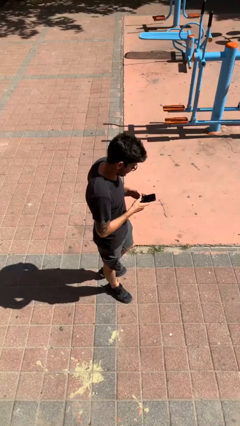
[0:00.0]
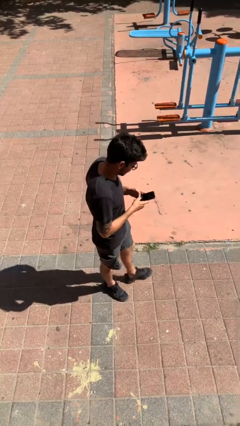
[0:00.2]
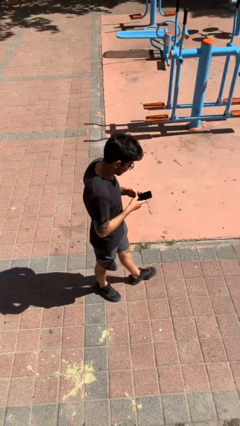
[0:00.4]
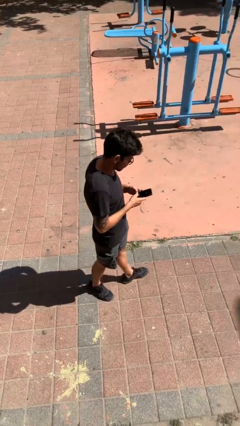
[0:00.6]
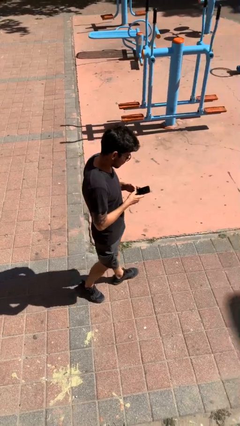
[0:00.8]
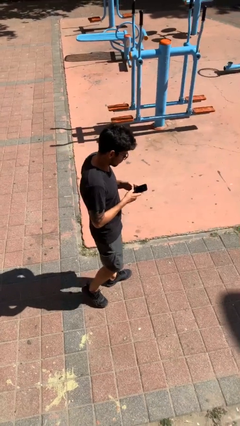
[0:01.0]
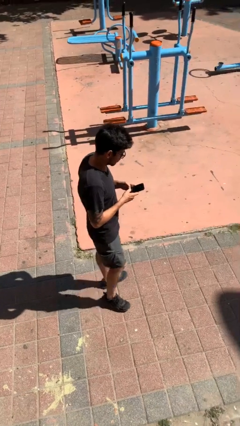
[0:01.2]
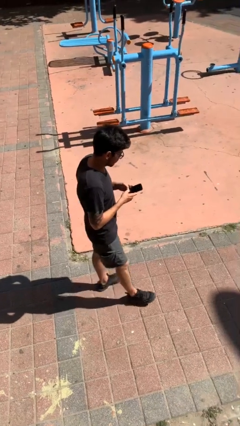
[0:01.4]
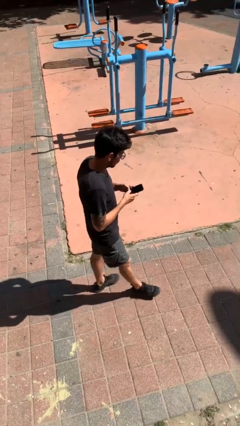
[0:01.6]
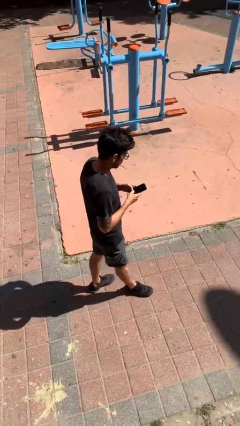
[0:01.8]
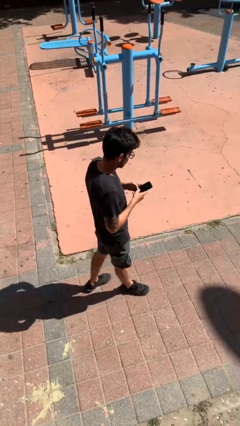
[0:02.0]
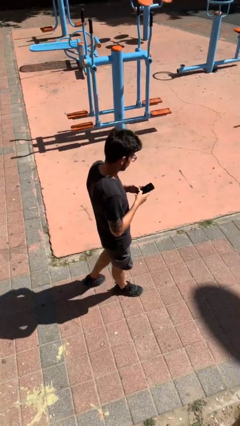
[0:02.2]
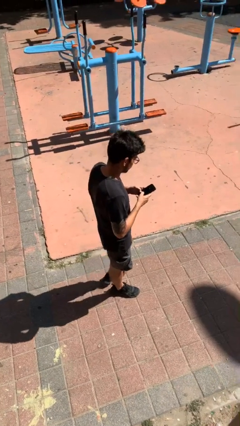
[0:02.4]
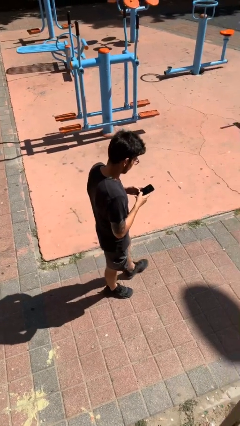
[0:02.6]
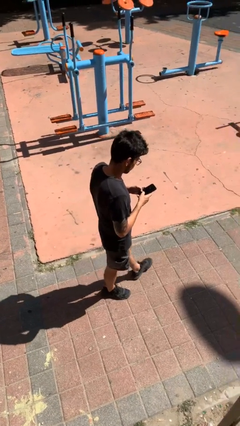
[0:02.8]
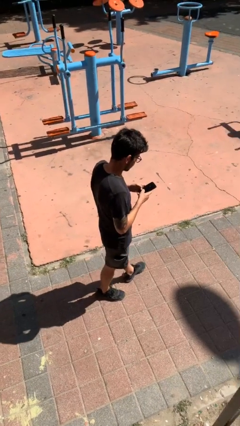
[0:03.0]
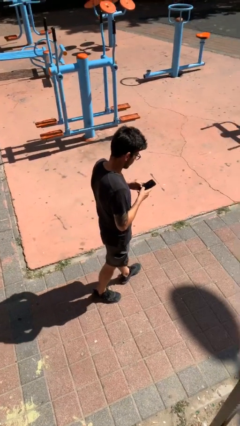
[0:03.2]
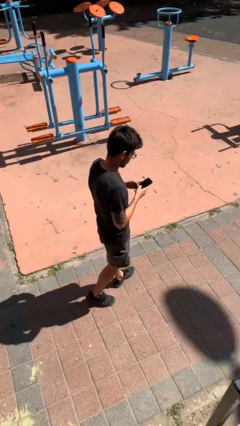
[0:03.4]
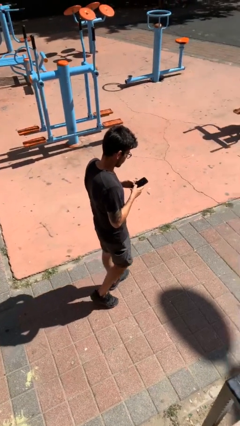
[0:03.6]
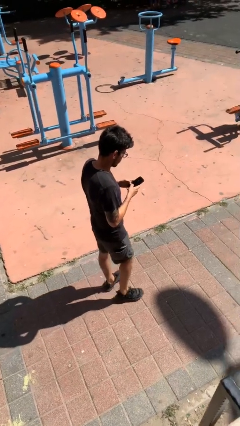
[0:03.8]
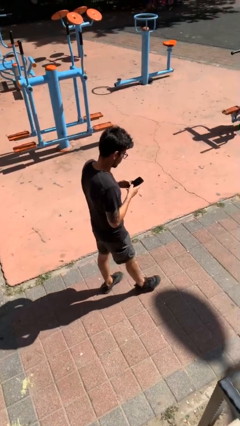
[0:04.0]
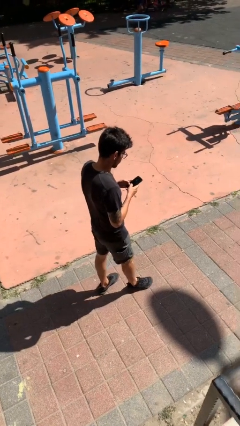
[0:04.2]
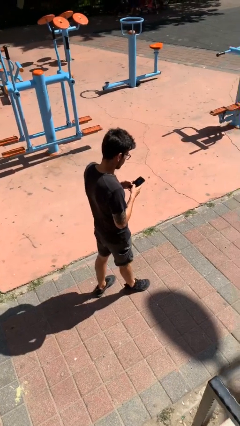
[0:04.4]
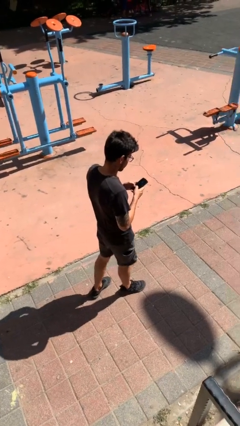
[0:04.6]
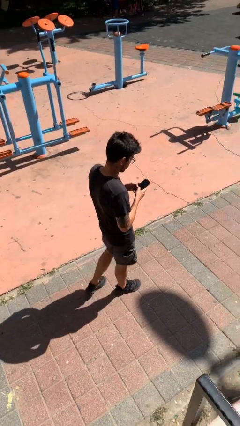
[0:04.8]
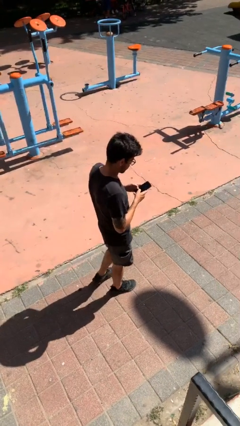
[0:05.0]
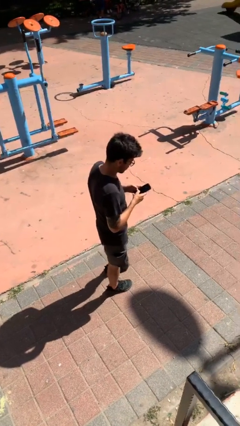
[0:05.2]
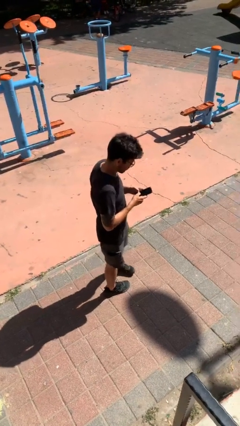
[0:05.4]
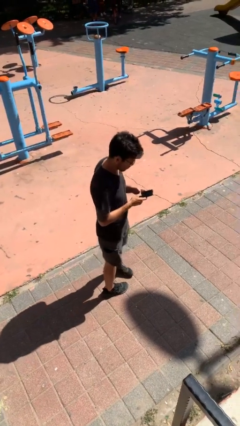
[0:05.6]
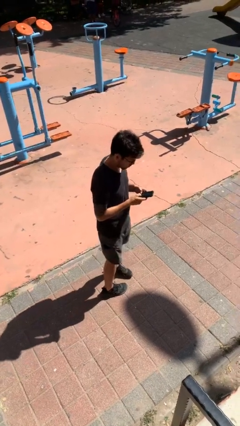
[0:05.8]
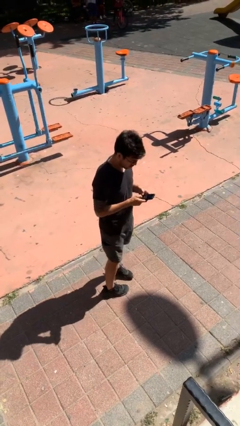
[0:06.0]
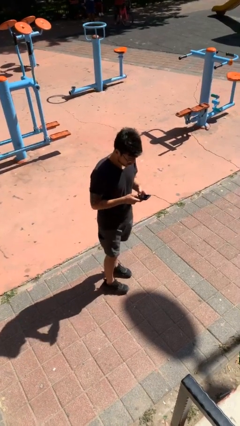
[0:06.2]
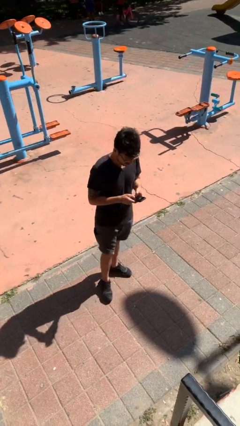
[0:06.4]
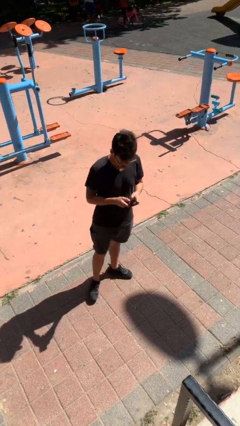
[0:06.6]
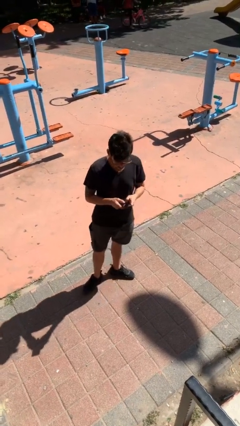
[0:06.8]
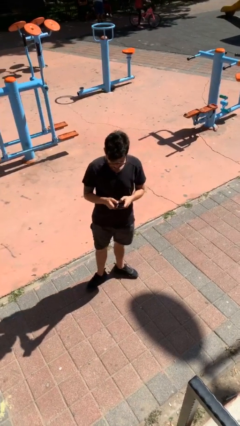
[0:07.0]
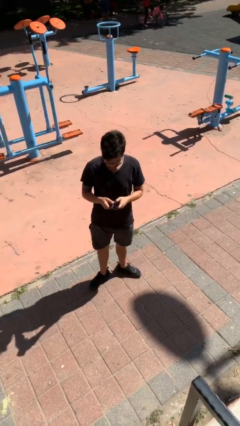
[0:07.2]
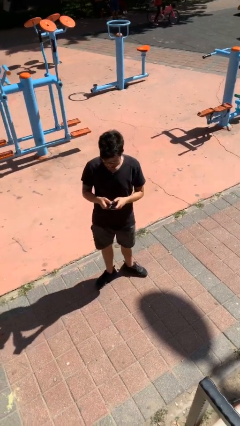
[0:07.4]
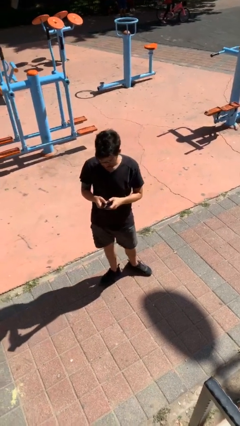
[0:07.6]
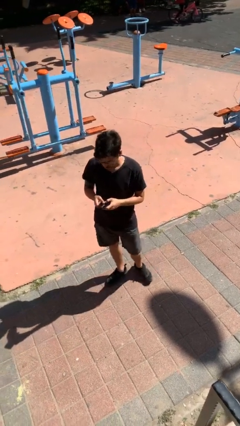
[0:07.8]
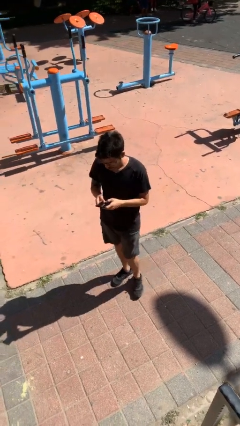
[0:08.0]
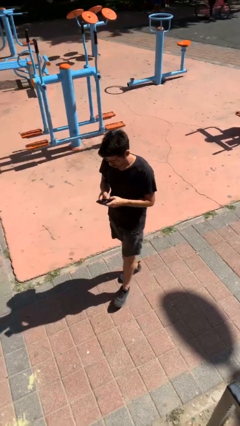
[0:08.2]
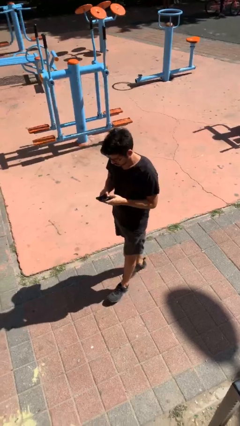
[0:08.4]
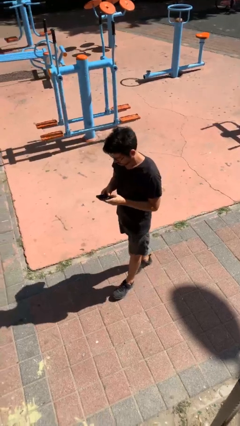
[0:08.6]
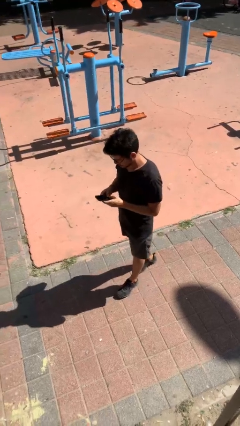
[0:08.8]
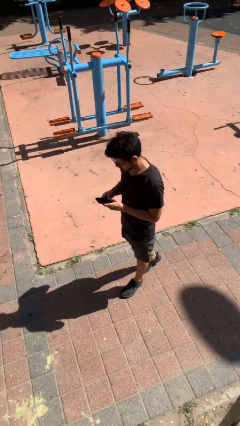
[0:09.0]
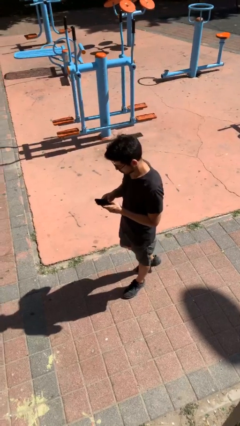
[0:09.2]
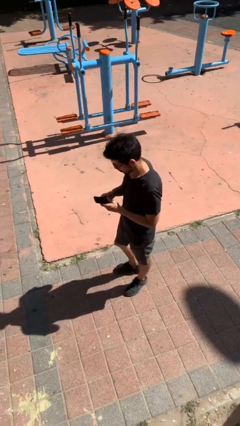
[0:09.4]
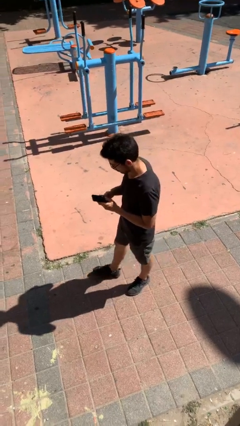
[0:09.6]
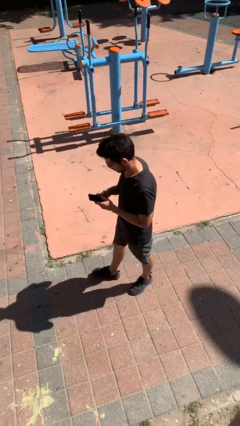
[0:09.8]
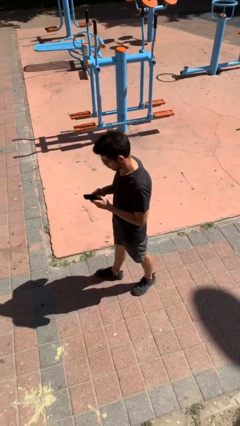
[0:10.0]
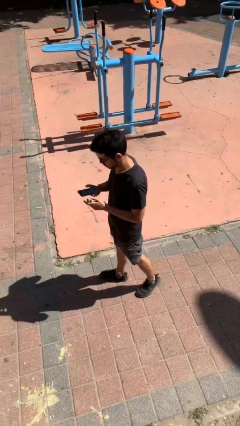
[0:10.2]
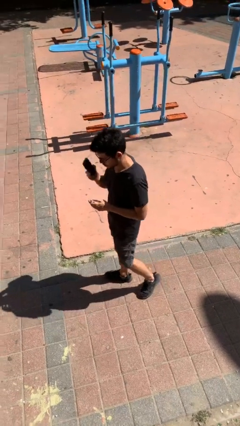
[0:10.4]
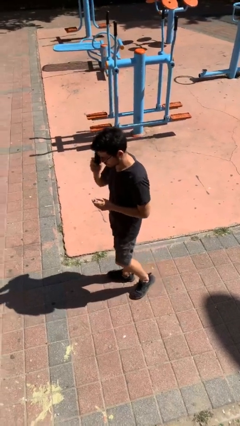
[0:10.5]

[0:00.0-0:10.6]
person texts on phone

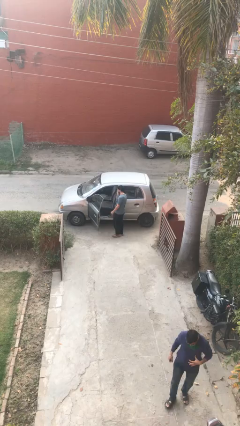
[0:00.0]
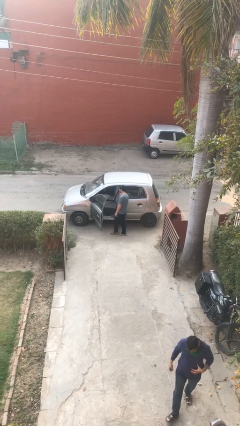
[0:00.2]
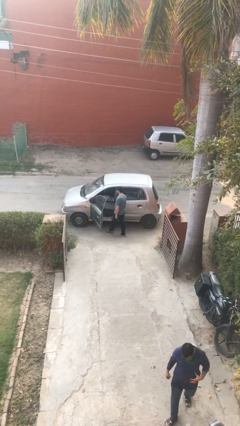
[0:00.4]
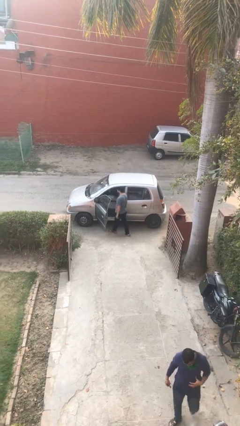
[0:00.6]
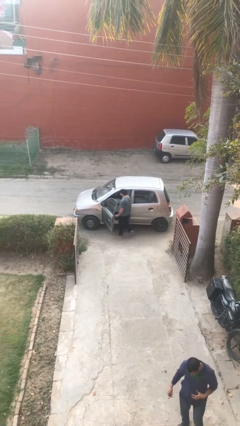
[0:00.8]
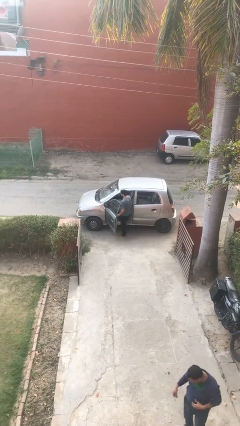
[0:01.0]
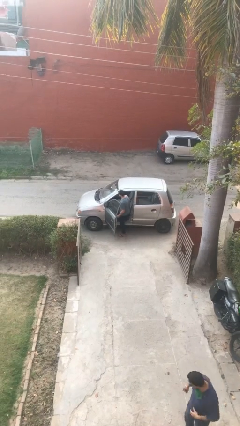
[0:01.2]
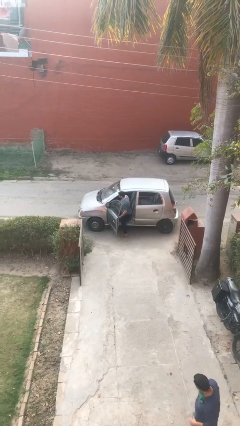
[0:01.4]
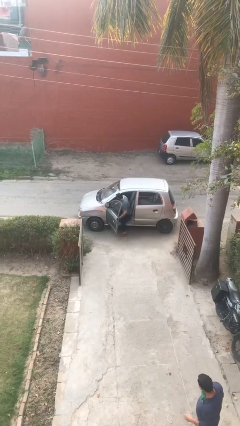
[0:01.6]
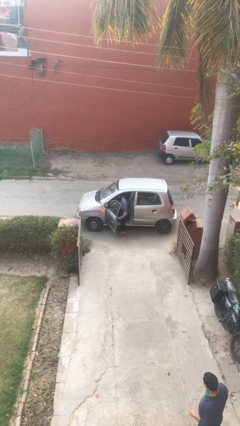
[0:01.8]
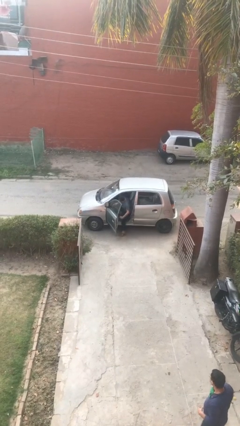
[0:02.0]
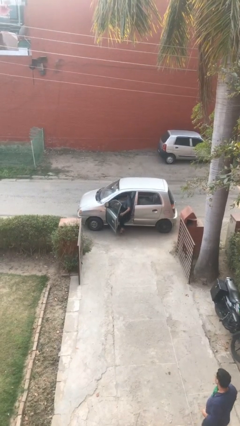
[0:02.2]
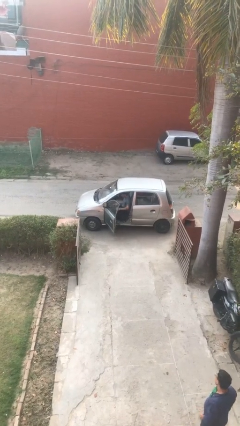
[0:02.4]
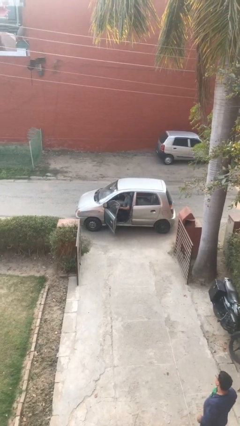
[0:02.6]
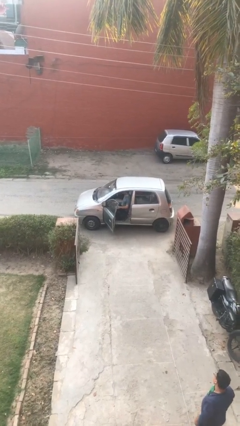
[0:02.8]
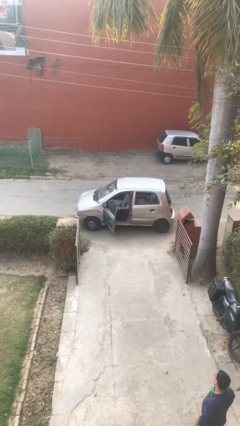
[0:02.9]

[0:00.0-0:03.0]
person enters car

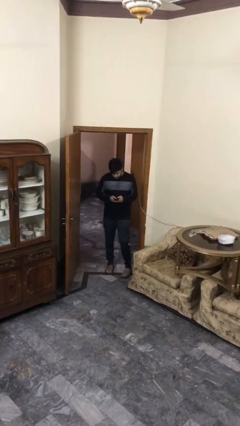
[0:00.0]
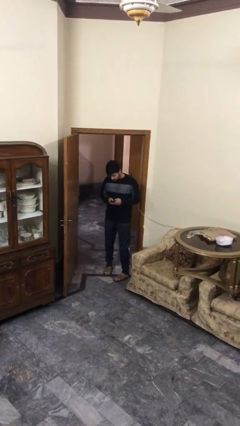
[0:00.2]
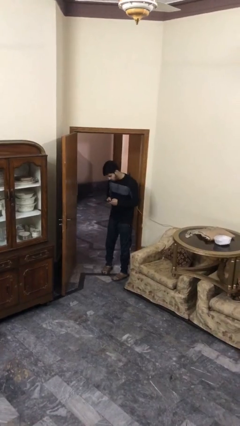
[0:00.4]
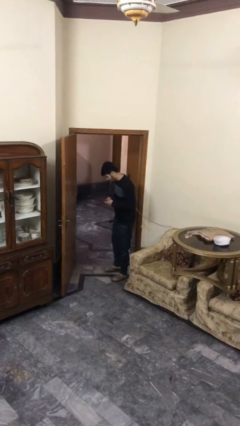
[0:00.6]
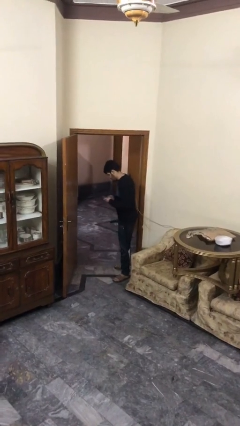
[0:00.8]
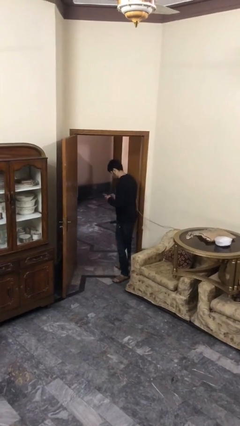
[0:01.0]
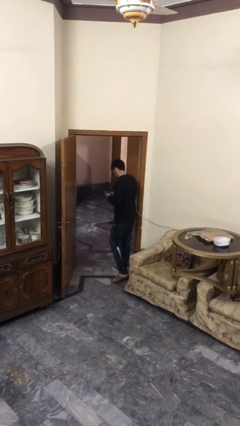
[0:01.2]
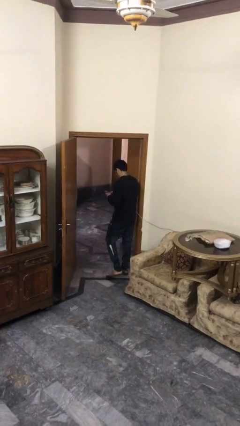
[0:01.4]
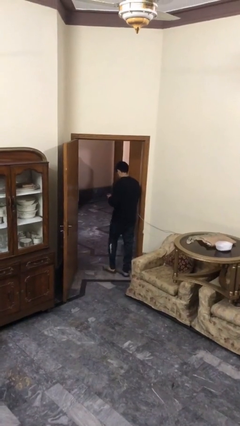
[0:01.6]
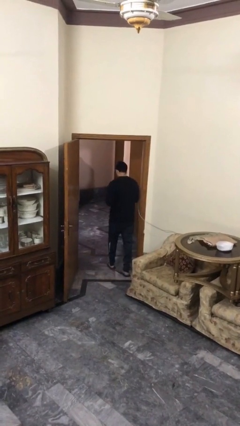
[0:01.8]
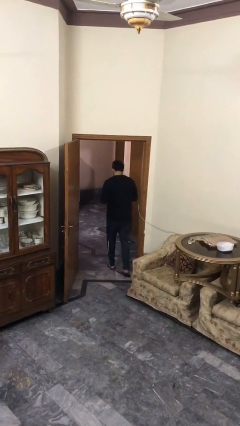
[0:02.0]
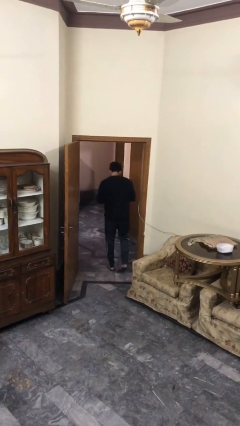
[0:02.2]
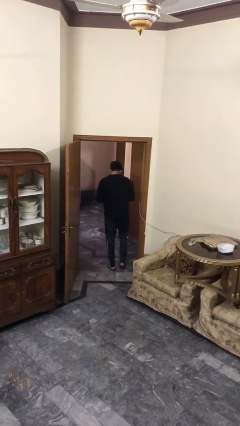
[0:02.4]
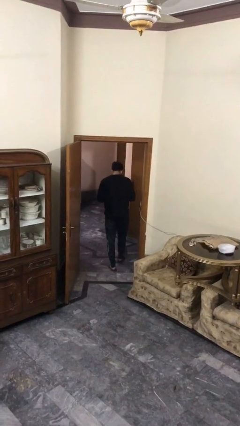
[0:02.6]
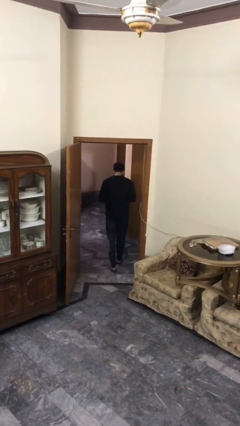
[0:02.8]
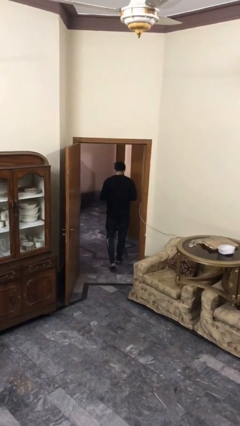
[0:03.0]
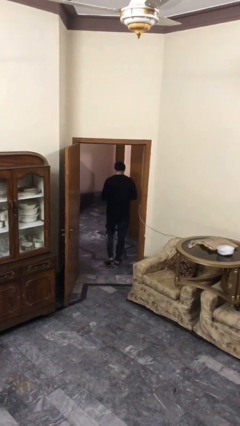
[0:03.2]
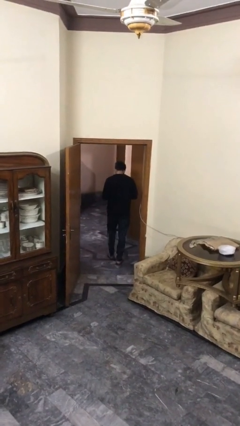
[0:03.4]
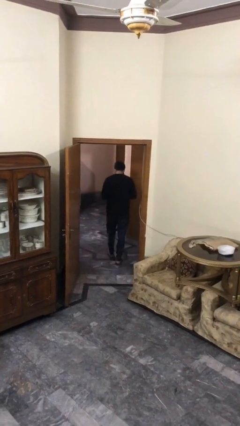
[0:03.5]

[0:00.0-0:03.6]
person exits scene through structure

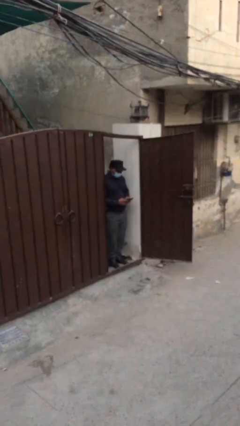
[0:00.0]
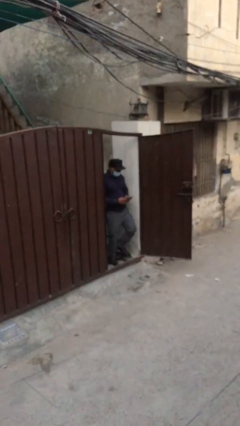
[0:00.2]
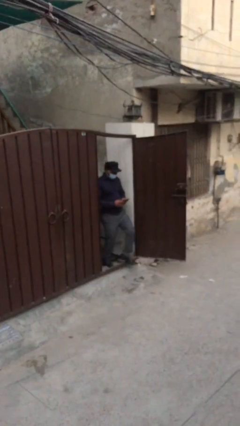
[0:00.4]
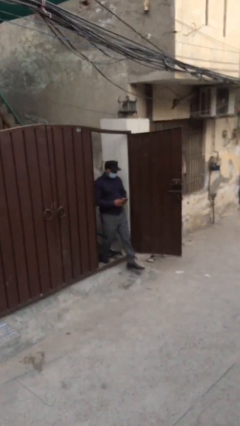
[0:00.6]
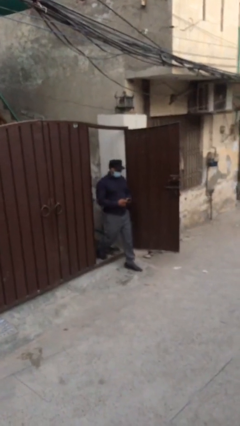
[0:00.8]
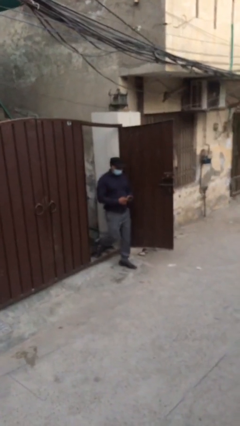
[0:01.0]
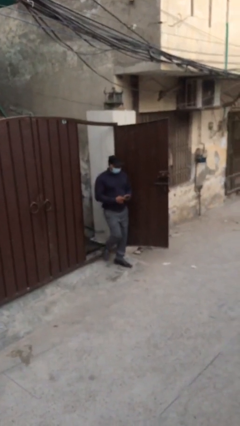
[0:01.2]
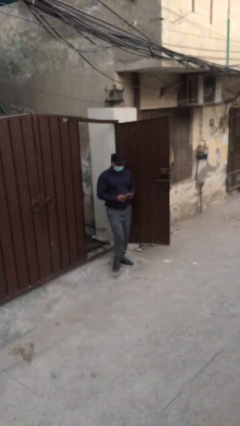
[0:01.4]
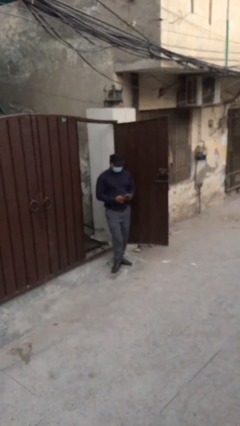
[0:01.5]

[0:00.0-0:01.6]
person enters scene through structure
